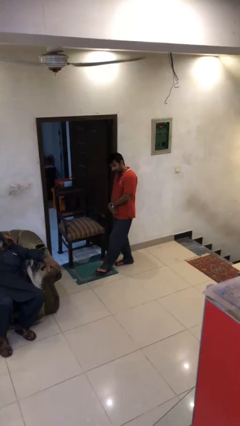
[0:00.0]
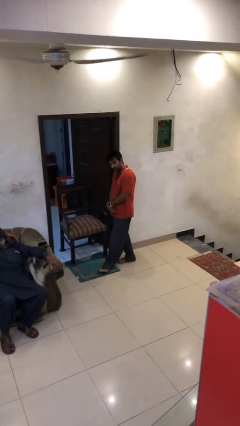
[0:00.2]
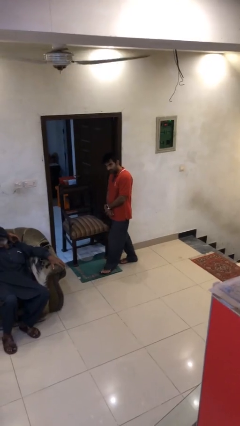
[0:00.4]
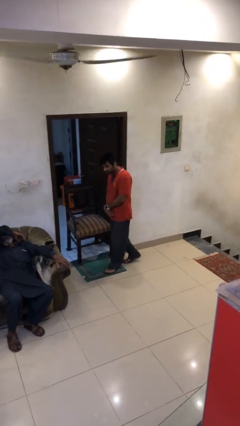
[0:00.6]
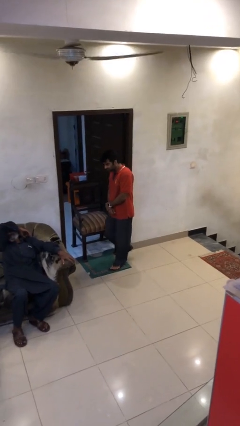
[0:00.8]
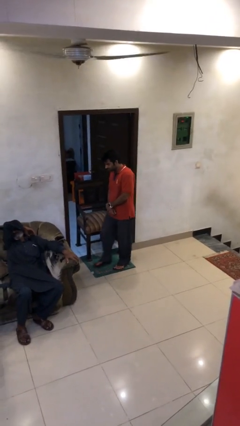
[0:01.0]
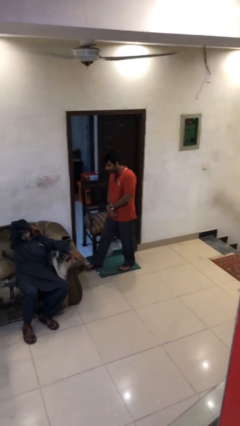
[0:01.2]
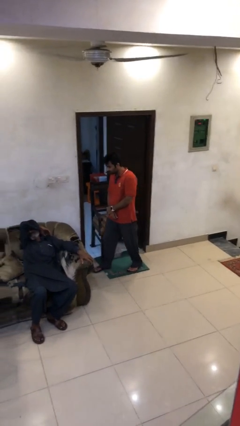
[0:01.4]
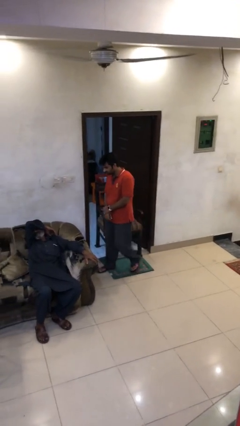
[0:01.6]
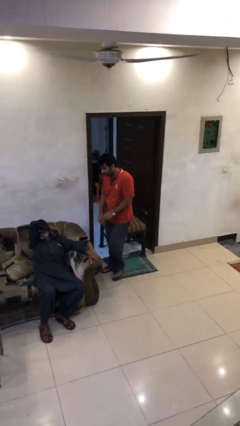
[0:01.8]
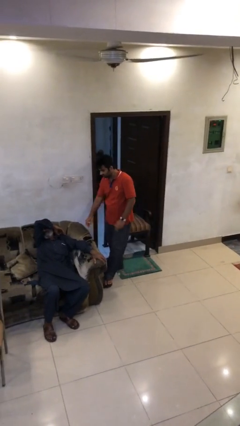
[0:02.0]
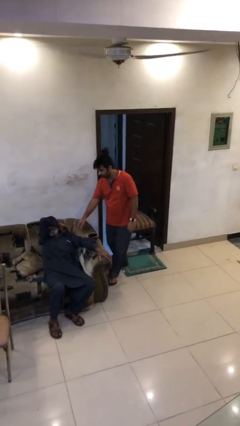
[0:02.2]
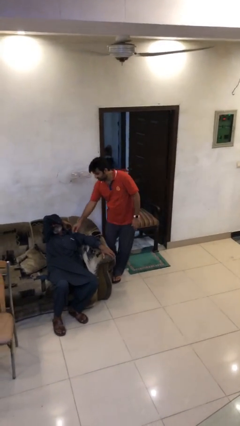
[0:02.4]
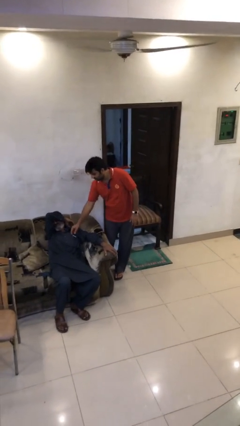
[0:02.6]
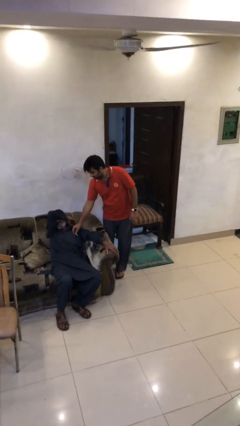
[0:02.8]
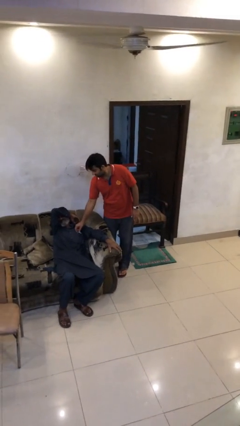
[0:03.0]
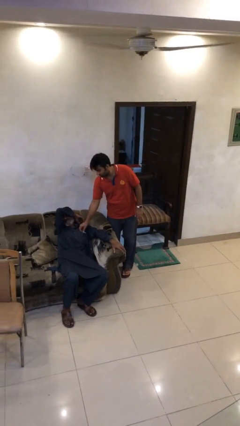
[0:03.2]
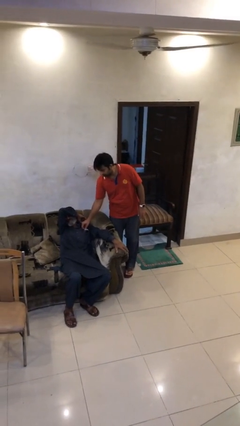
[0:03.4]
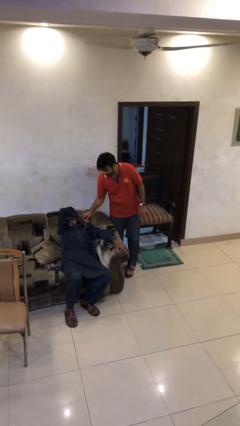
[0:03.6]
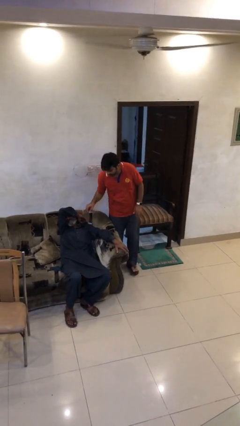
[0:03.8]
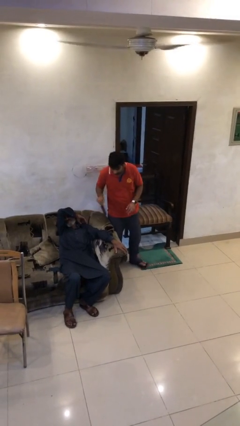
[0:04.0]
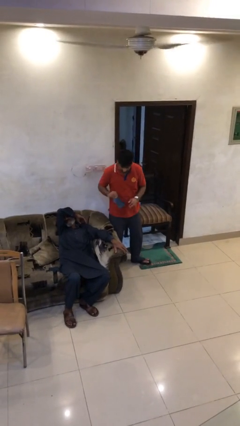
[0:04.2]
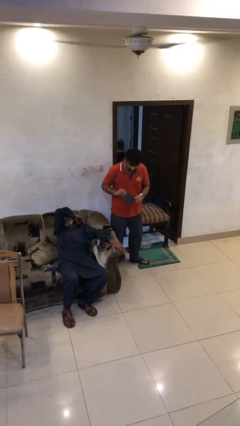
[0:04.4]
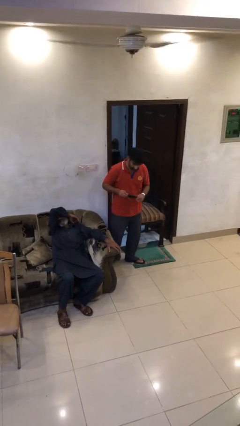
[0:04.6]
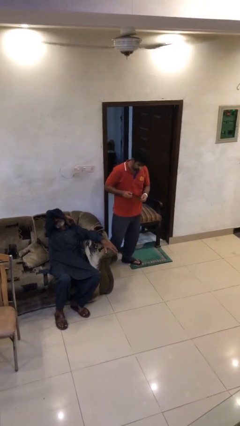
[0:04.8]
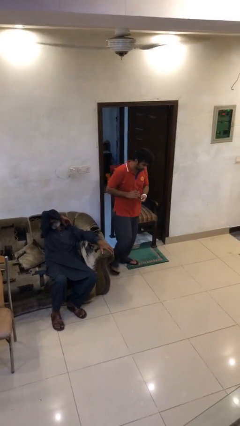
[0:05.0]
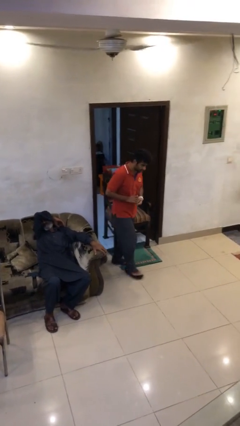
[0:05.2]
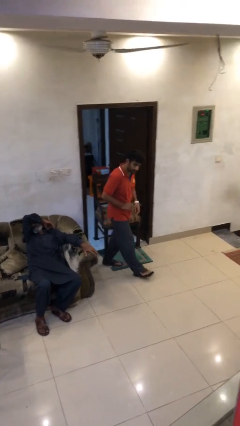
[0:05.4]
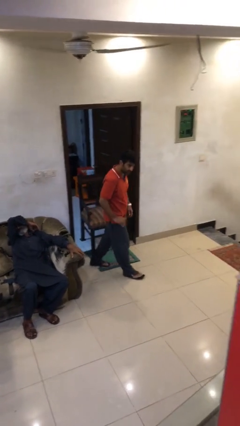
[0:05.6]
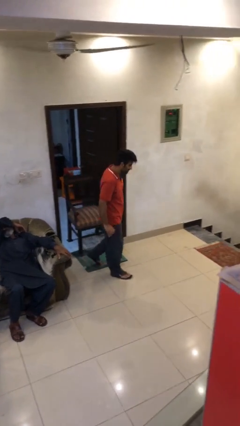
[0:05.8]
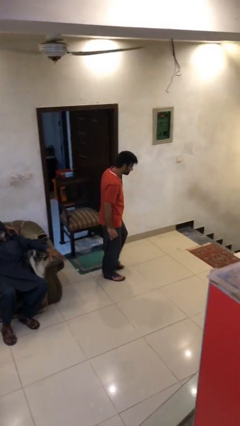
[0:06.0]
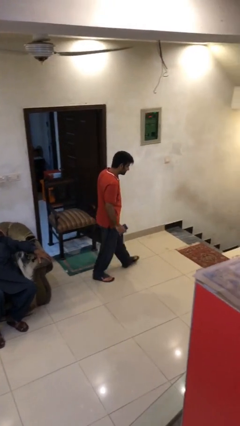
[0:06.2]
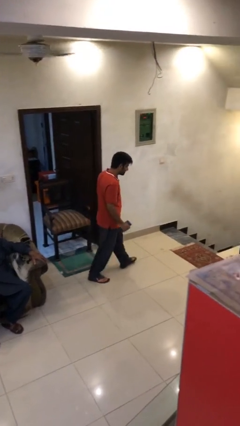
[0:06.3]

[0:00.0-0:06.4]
person steals object from person

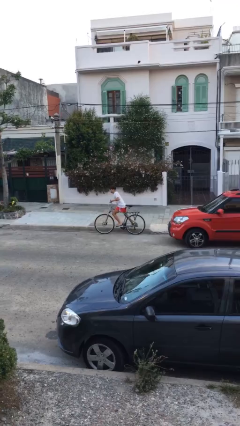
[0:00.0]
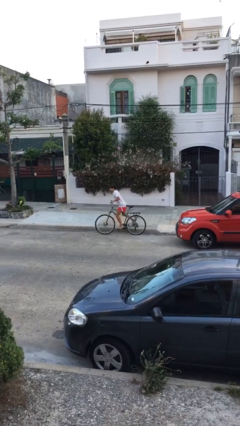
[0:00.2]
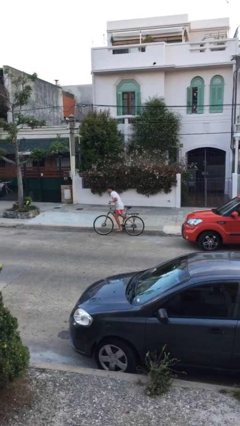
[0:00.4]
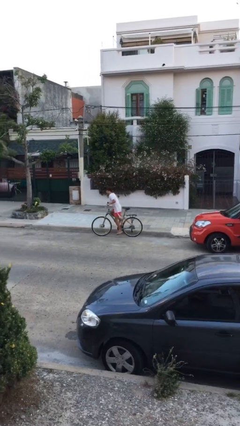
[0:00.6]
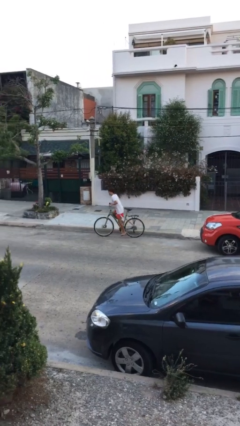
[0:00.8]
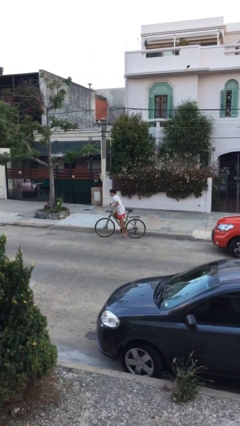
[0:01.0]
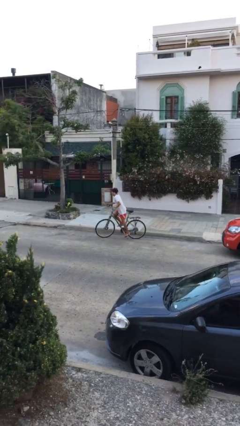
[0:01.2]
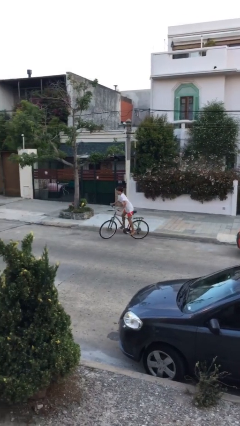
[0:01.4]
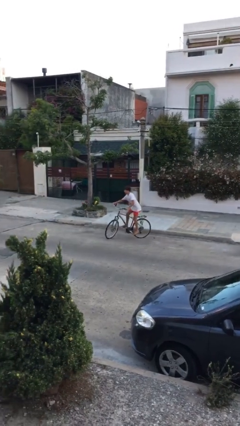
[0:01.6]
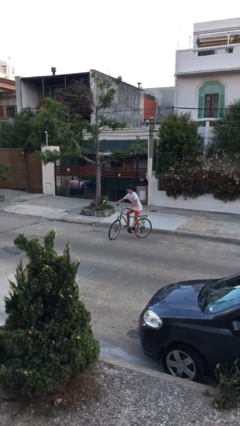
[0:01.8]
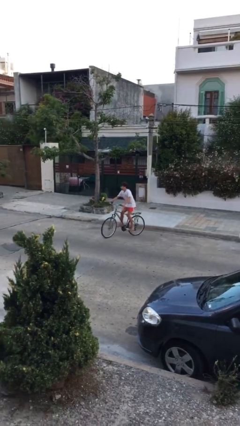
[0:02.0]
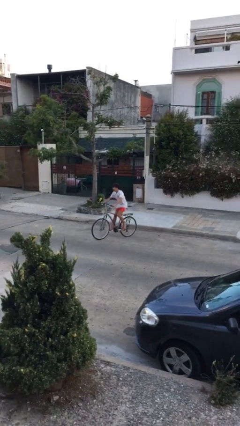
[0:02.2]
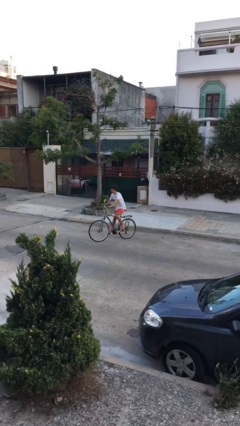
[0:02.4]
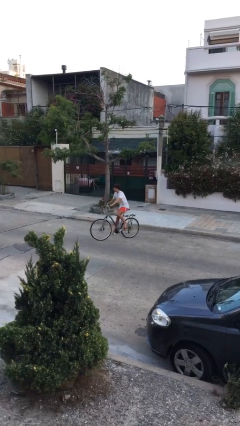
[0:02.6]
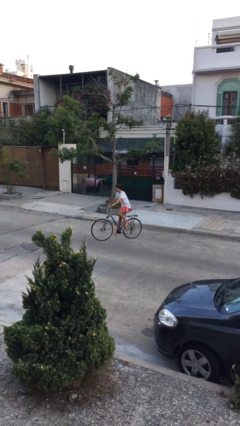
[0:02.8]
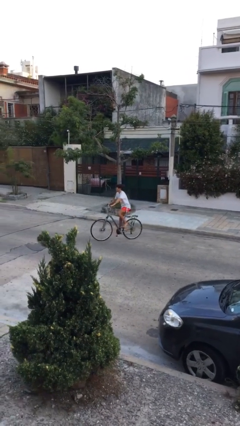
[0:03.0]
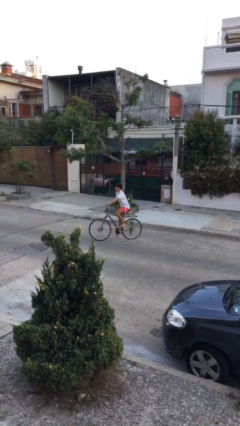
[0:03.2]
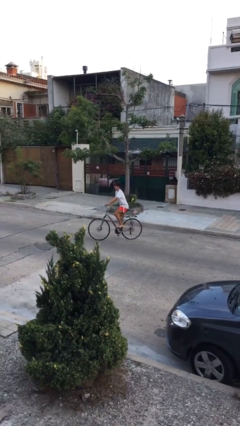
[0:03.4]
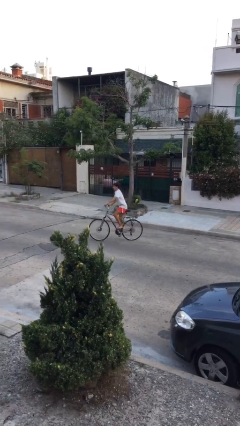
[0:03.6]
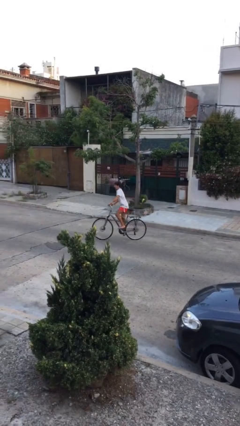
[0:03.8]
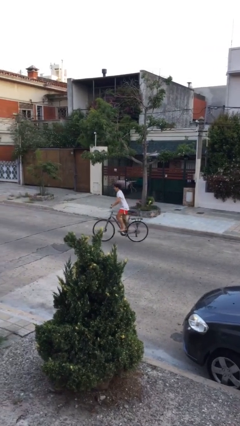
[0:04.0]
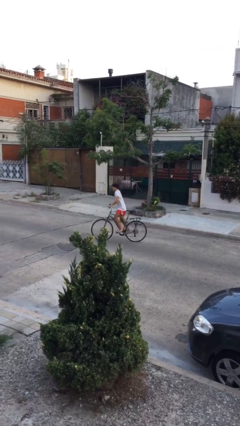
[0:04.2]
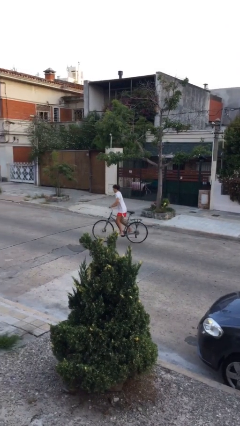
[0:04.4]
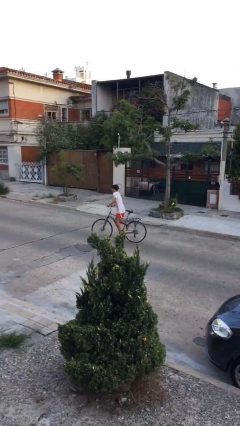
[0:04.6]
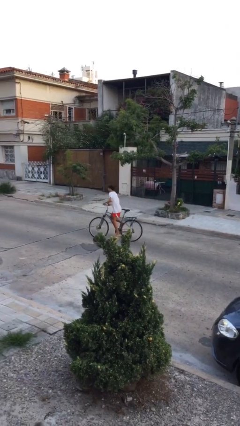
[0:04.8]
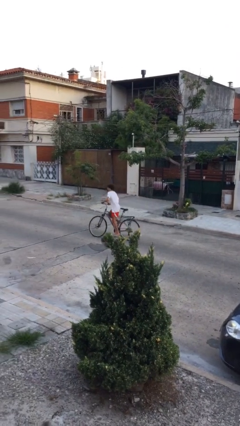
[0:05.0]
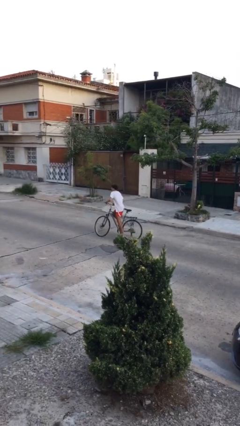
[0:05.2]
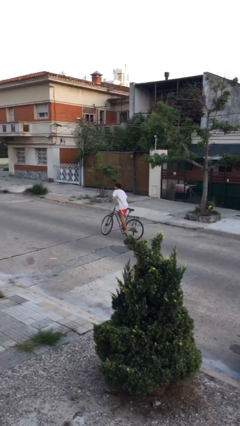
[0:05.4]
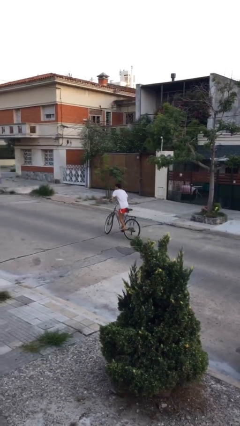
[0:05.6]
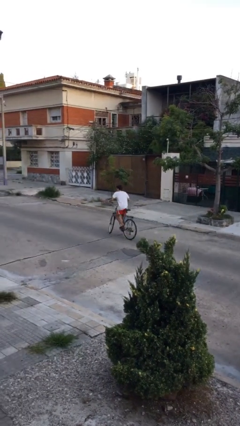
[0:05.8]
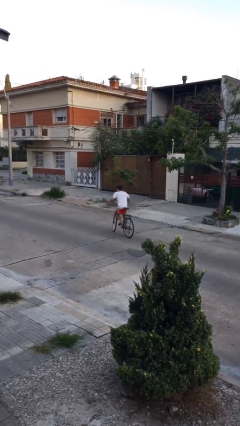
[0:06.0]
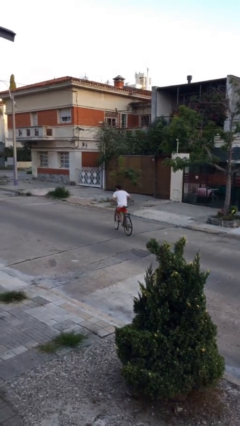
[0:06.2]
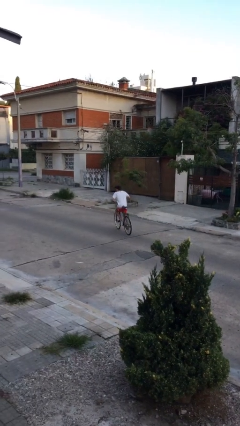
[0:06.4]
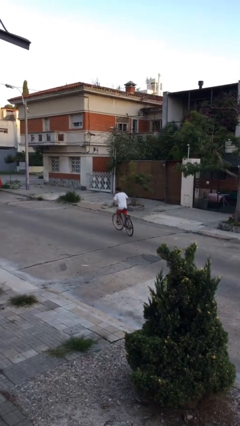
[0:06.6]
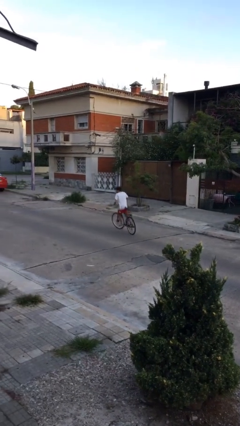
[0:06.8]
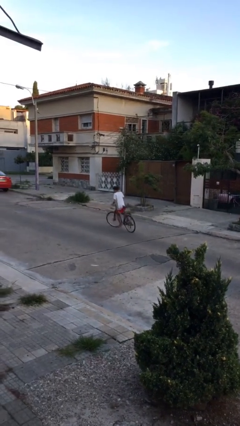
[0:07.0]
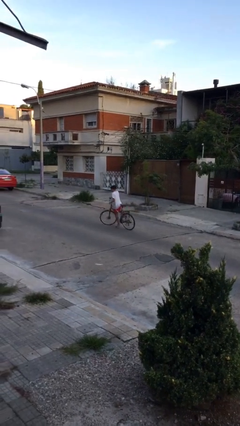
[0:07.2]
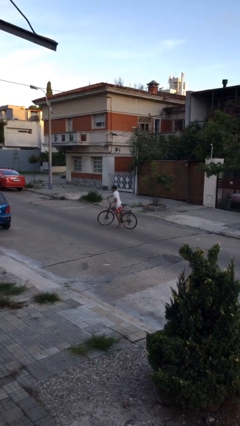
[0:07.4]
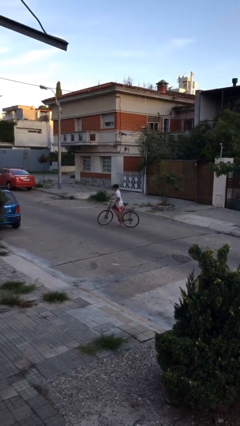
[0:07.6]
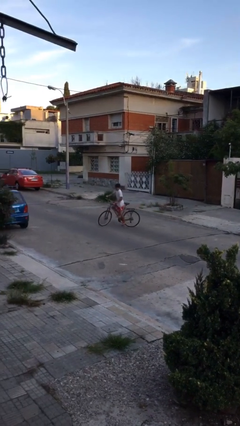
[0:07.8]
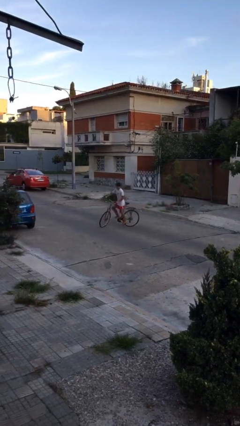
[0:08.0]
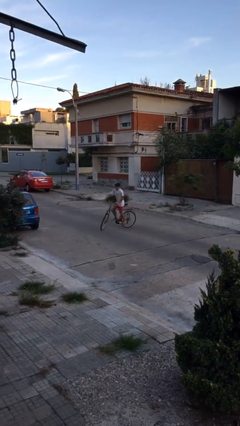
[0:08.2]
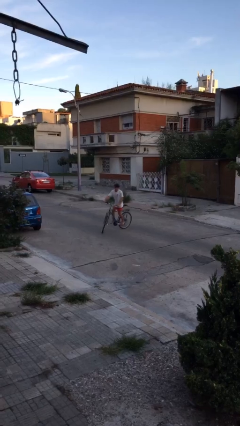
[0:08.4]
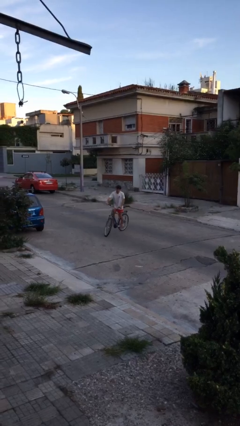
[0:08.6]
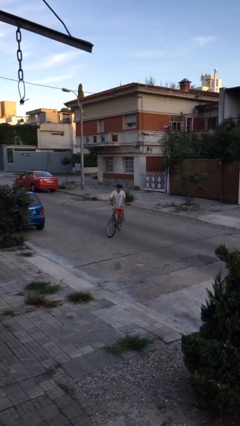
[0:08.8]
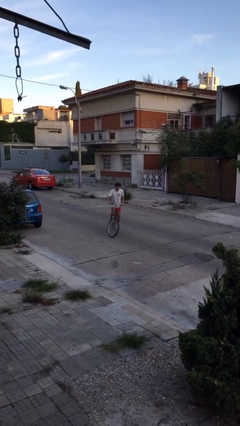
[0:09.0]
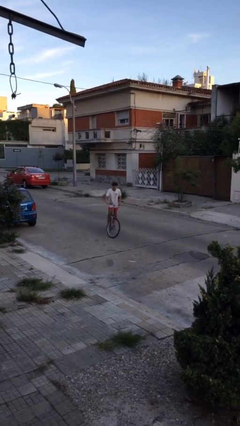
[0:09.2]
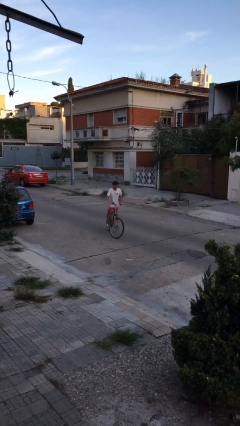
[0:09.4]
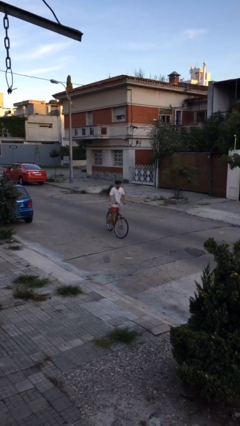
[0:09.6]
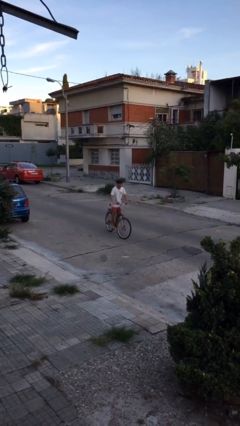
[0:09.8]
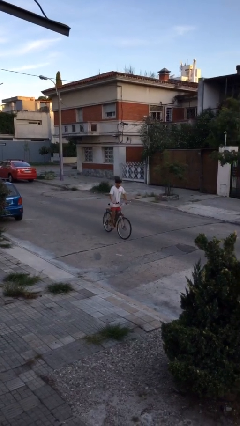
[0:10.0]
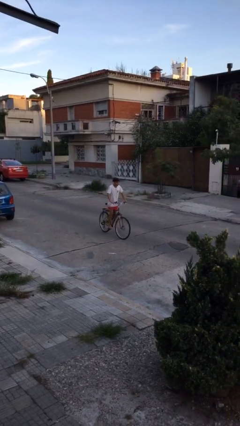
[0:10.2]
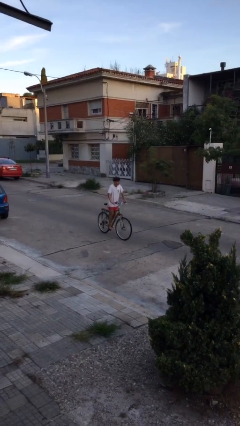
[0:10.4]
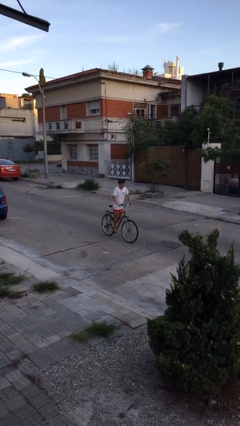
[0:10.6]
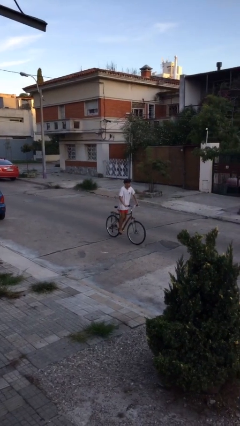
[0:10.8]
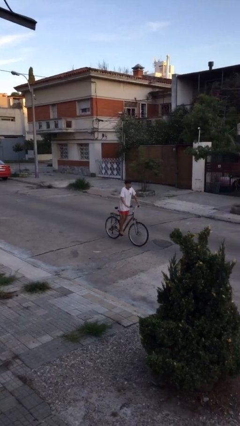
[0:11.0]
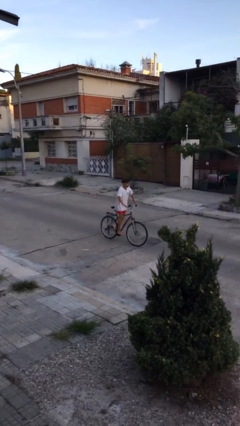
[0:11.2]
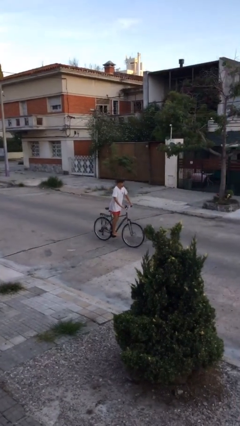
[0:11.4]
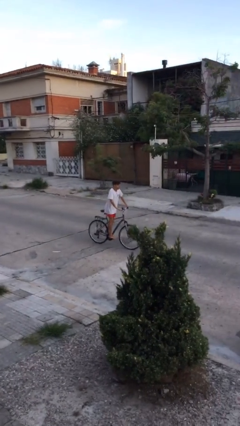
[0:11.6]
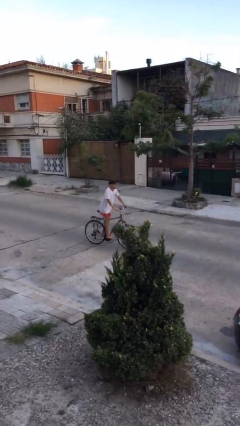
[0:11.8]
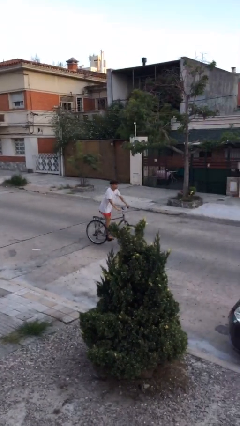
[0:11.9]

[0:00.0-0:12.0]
person rides bicycle
